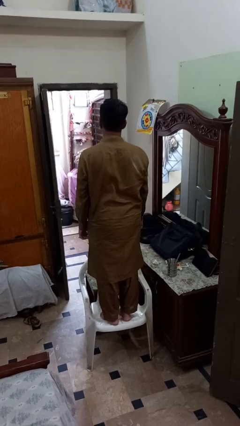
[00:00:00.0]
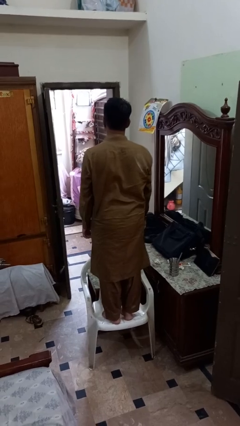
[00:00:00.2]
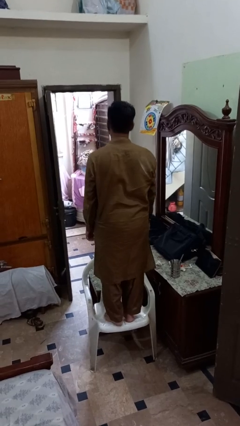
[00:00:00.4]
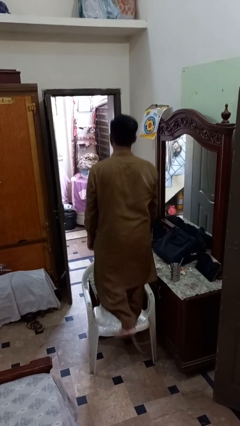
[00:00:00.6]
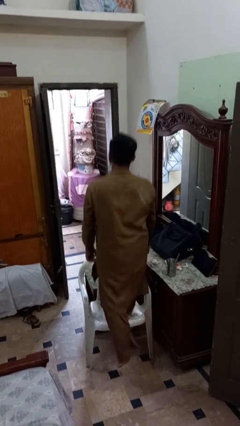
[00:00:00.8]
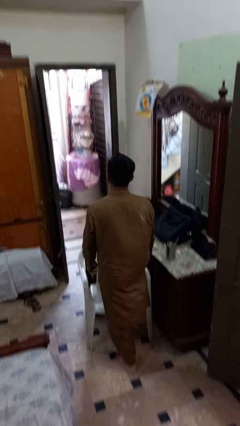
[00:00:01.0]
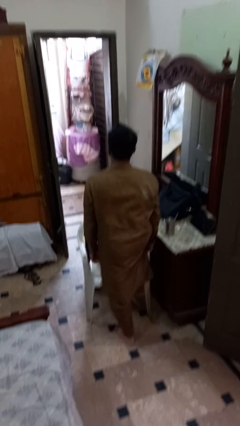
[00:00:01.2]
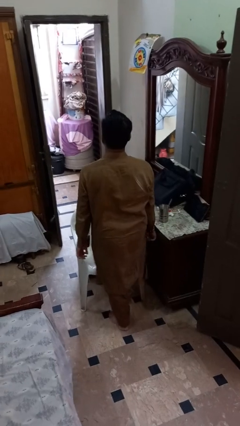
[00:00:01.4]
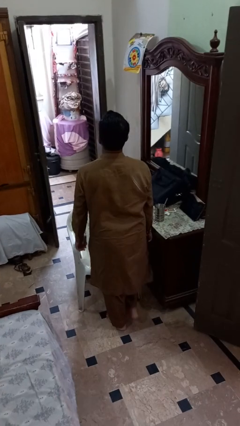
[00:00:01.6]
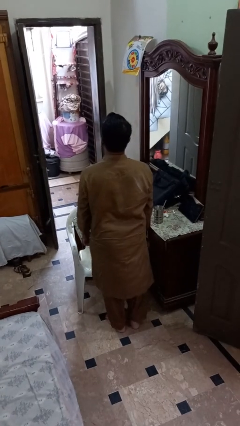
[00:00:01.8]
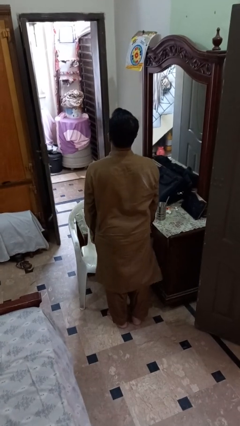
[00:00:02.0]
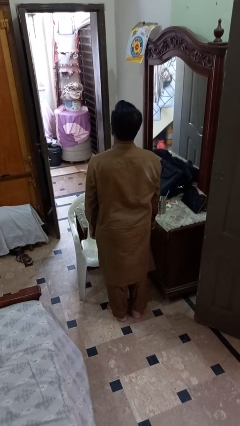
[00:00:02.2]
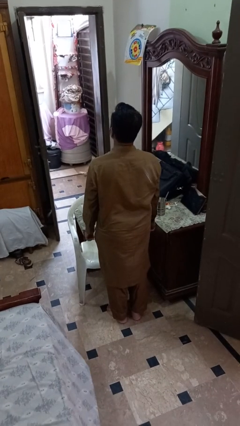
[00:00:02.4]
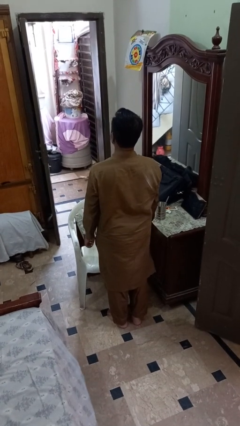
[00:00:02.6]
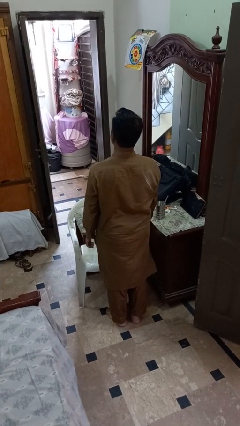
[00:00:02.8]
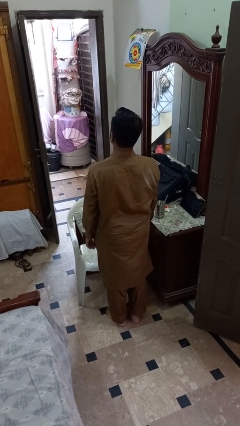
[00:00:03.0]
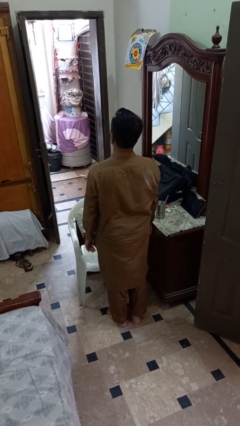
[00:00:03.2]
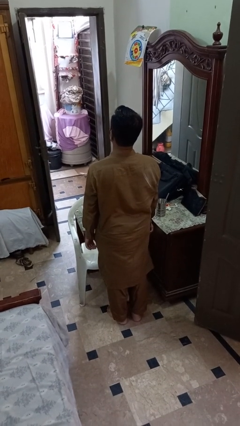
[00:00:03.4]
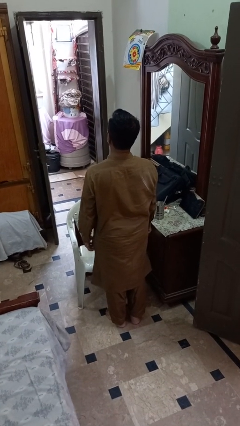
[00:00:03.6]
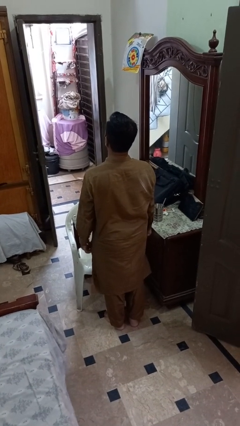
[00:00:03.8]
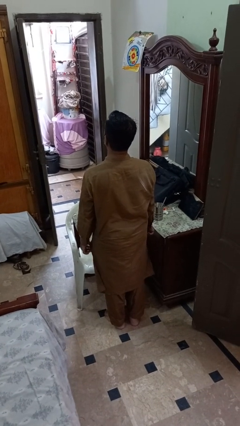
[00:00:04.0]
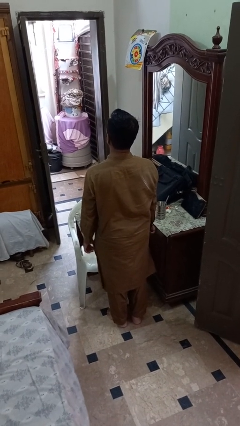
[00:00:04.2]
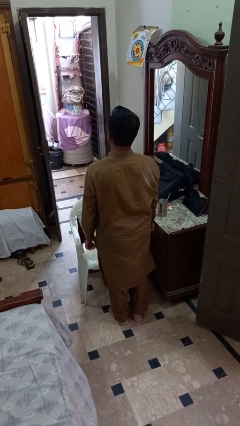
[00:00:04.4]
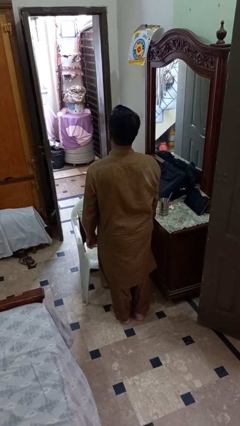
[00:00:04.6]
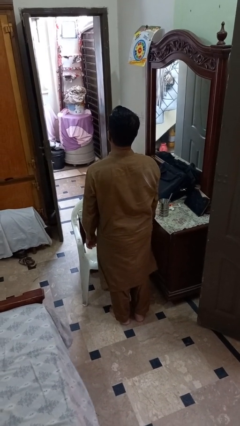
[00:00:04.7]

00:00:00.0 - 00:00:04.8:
person climbs off chair

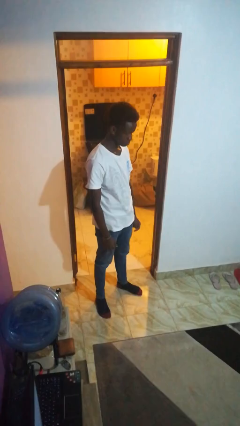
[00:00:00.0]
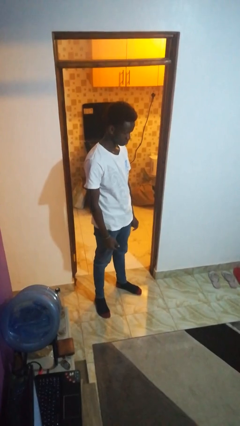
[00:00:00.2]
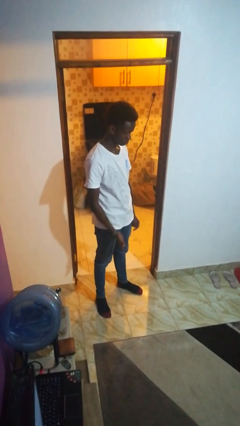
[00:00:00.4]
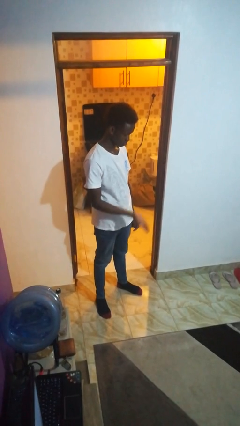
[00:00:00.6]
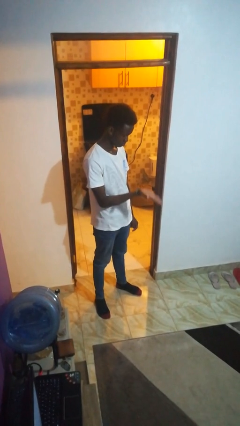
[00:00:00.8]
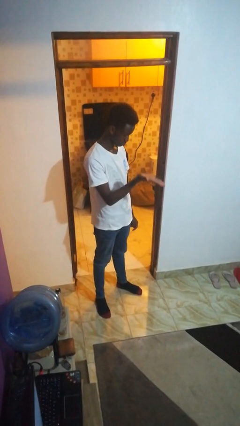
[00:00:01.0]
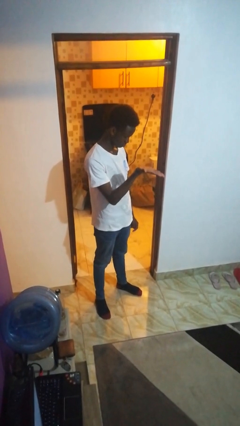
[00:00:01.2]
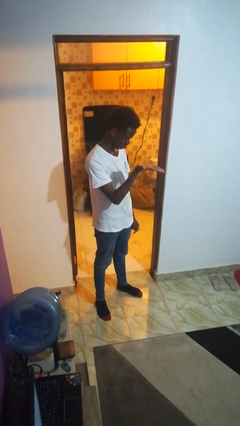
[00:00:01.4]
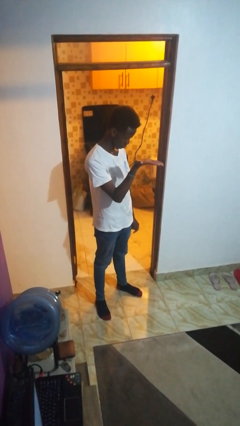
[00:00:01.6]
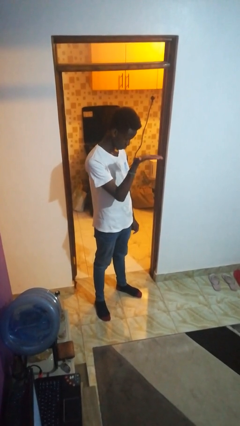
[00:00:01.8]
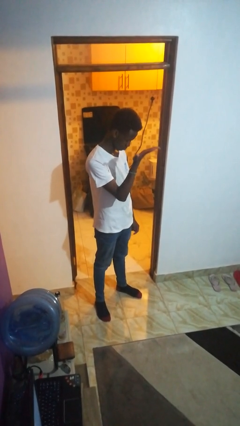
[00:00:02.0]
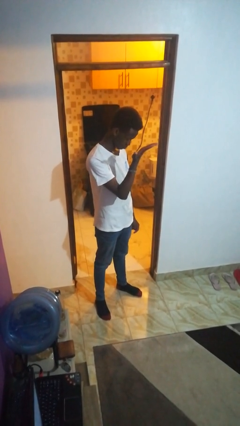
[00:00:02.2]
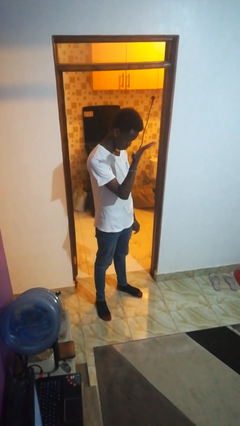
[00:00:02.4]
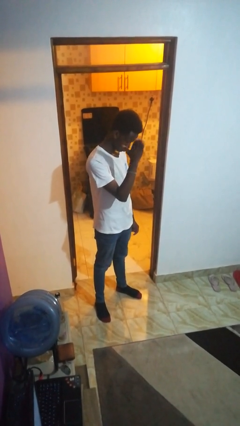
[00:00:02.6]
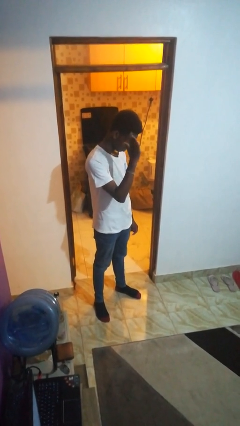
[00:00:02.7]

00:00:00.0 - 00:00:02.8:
person gestures swipe up

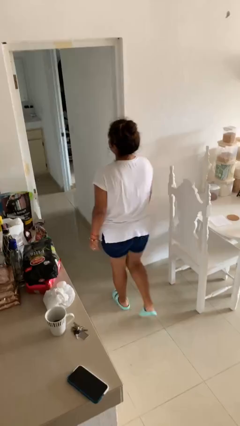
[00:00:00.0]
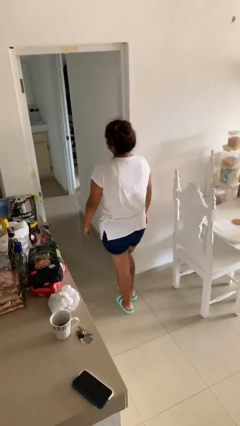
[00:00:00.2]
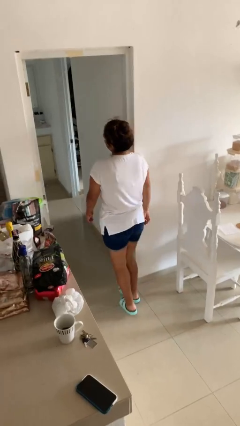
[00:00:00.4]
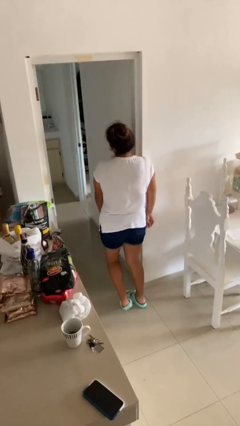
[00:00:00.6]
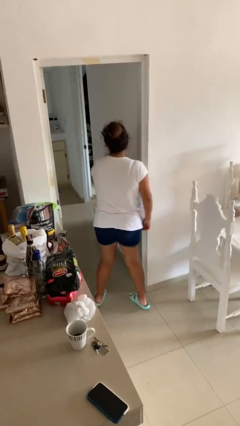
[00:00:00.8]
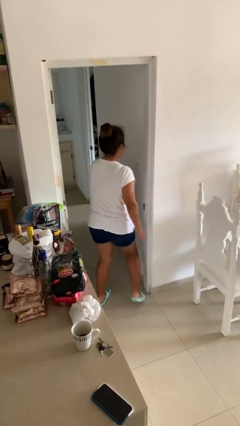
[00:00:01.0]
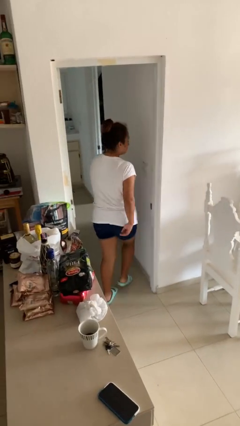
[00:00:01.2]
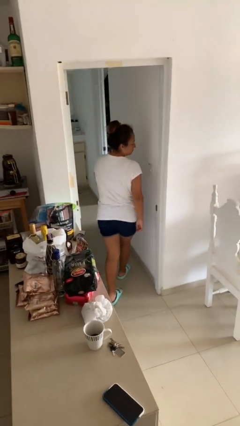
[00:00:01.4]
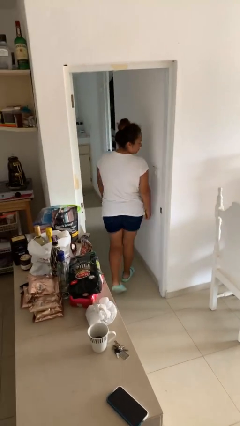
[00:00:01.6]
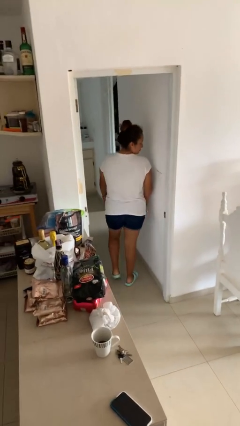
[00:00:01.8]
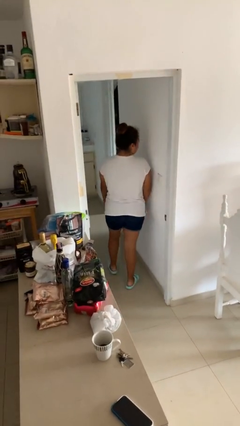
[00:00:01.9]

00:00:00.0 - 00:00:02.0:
person bumps into wall

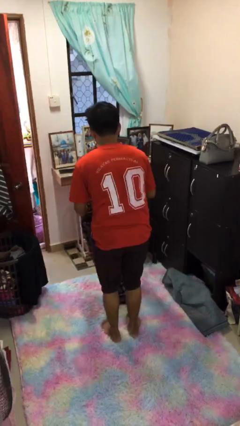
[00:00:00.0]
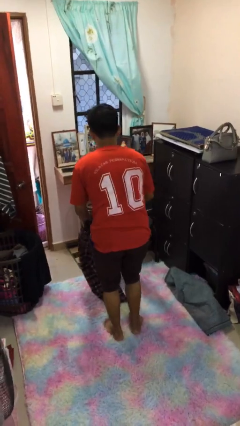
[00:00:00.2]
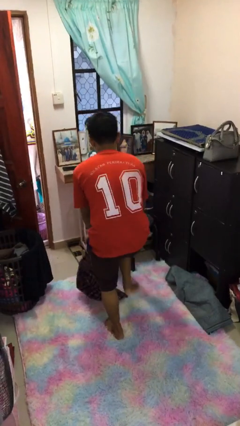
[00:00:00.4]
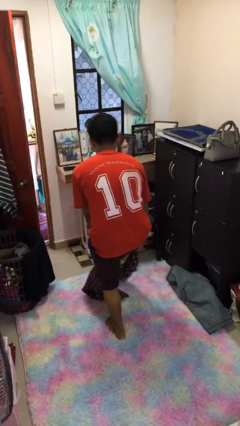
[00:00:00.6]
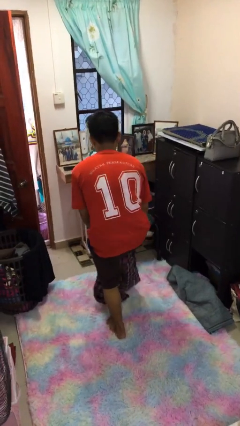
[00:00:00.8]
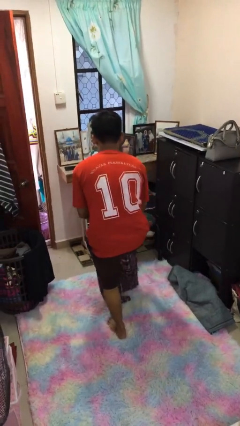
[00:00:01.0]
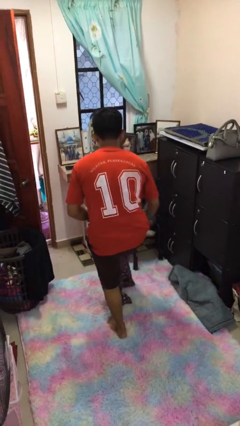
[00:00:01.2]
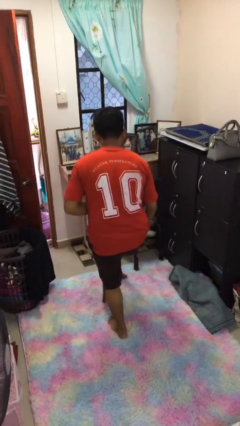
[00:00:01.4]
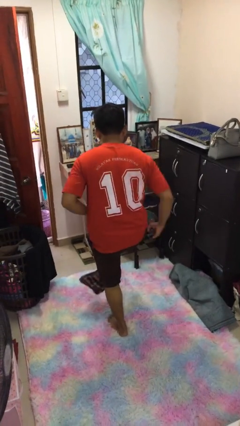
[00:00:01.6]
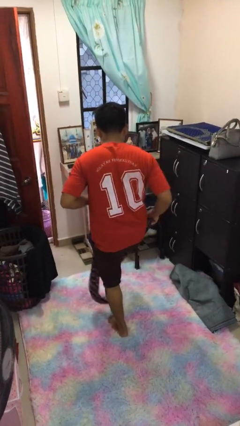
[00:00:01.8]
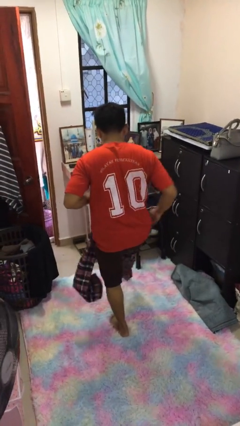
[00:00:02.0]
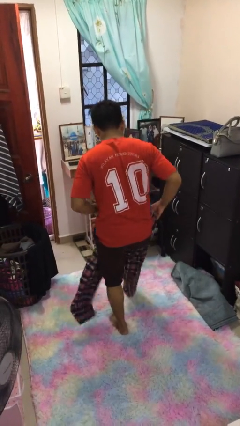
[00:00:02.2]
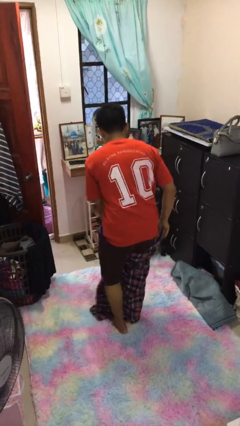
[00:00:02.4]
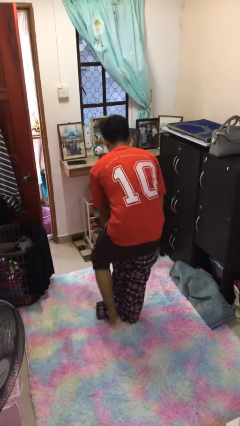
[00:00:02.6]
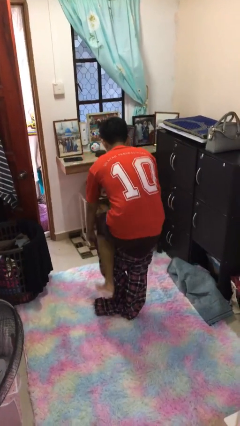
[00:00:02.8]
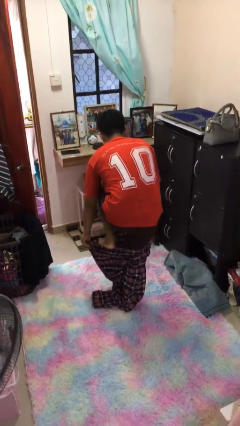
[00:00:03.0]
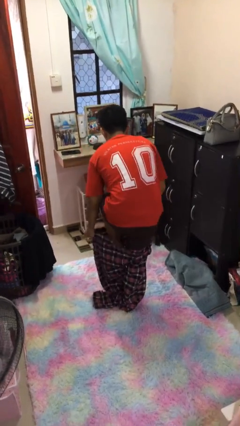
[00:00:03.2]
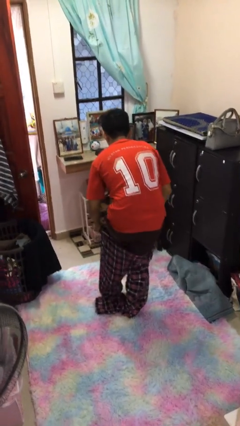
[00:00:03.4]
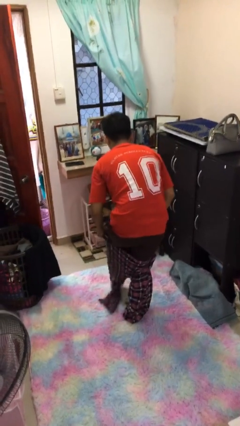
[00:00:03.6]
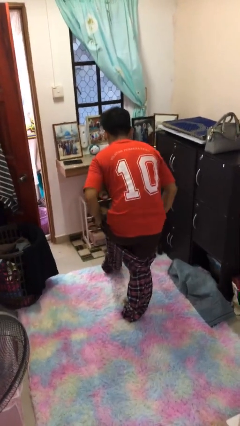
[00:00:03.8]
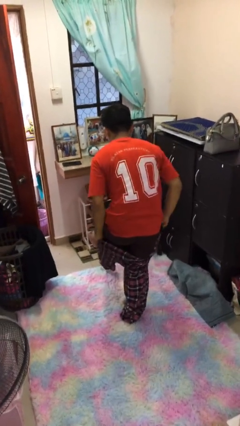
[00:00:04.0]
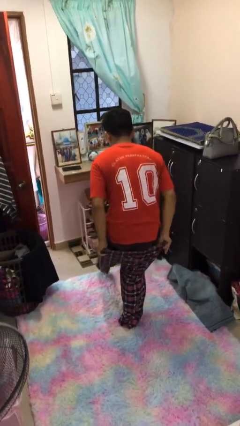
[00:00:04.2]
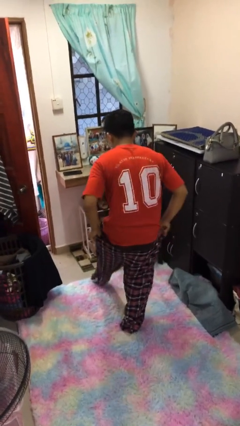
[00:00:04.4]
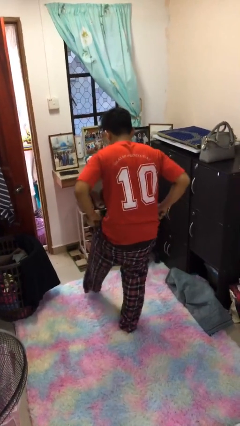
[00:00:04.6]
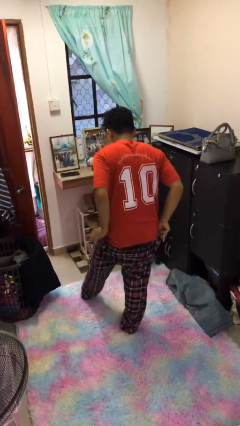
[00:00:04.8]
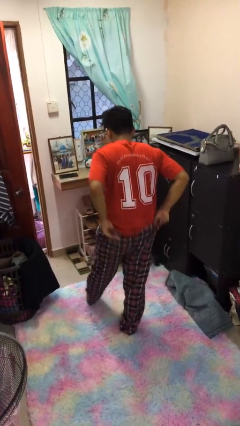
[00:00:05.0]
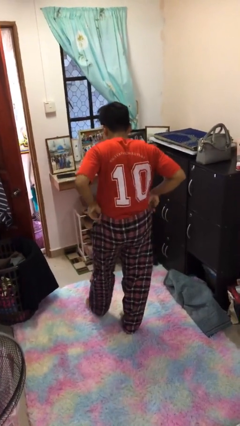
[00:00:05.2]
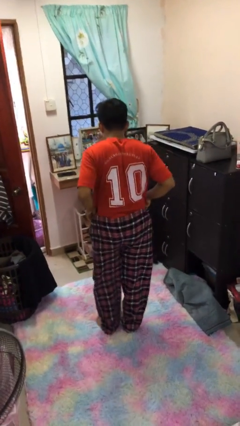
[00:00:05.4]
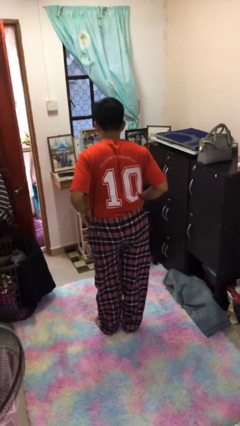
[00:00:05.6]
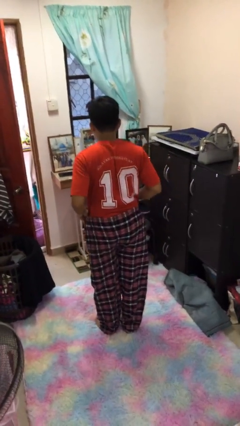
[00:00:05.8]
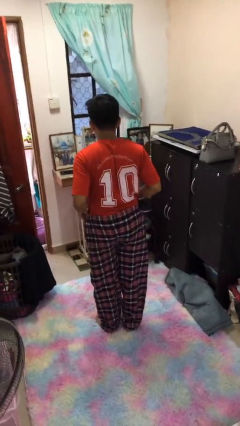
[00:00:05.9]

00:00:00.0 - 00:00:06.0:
person puts on pants

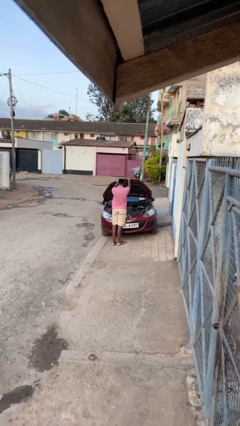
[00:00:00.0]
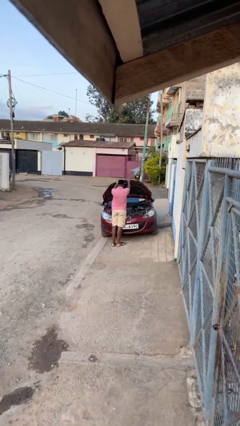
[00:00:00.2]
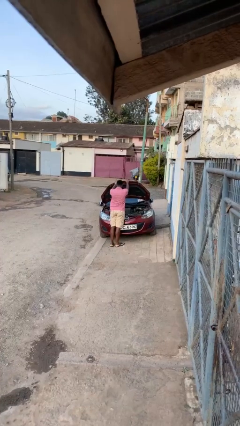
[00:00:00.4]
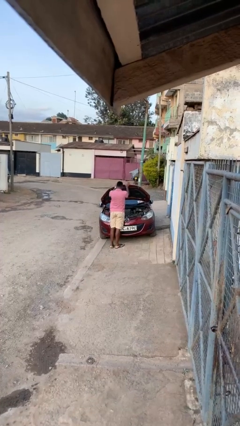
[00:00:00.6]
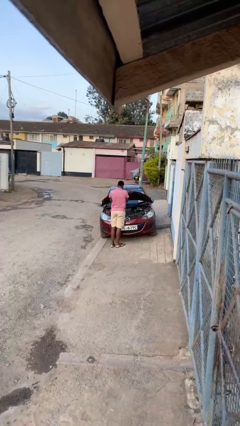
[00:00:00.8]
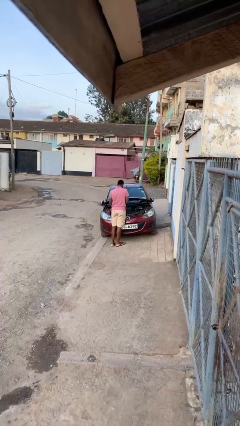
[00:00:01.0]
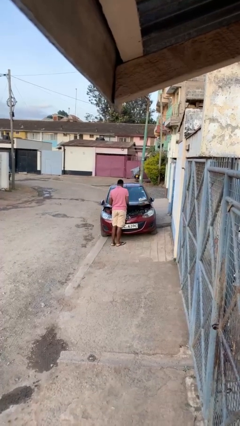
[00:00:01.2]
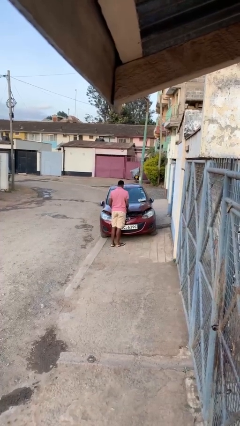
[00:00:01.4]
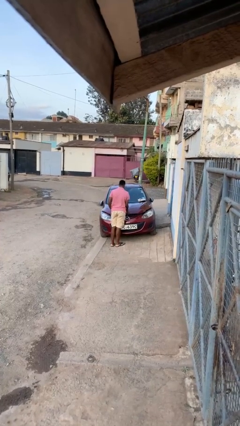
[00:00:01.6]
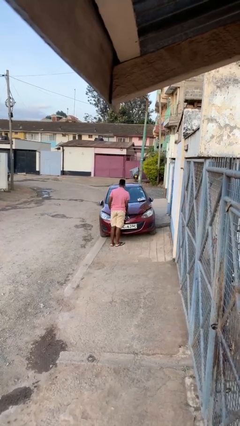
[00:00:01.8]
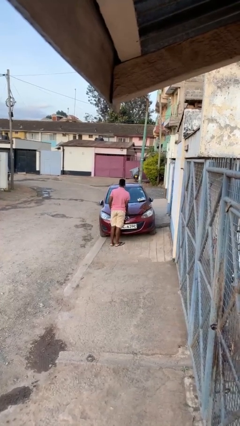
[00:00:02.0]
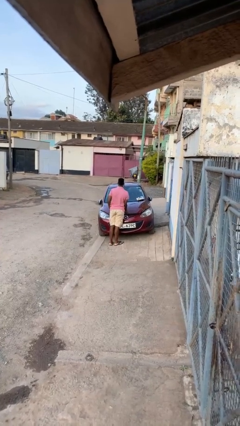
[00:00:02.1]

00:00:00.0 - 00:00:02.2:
person closes car hood
